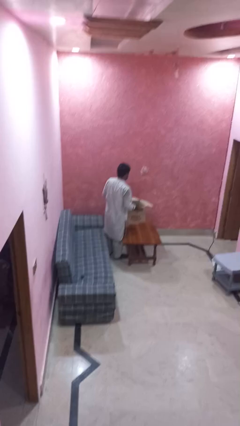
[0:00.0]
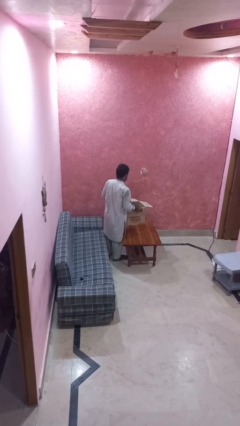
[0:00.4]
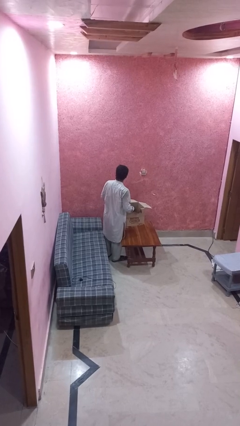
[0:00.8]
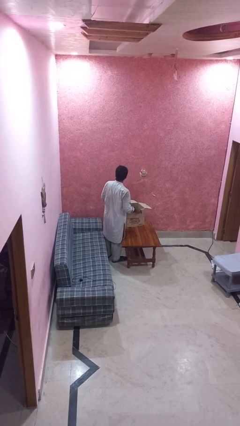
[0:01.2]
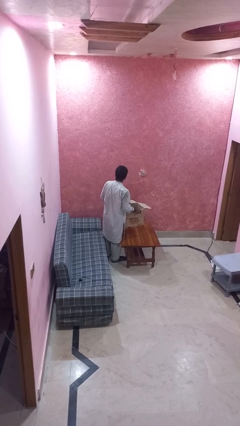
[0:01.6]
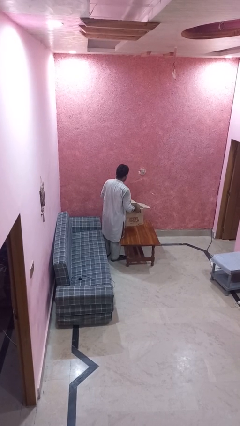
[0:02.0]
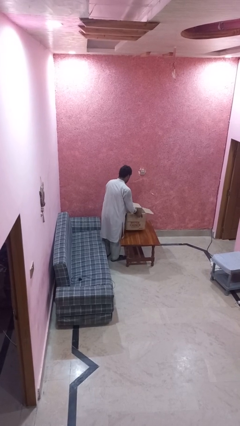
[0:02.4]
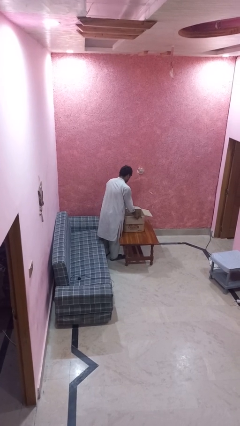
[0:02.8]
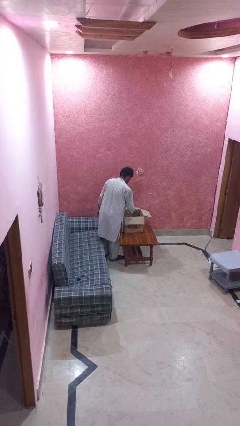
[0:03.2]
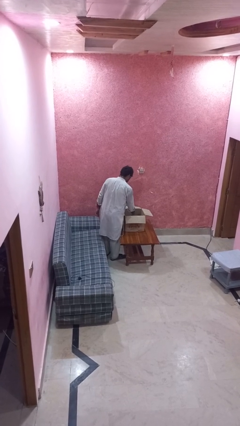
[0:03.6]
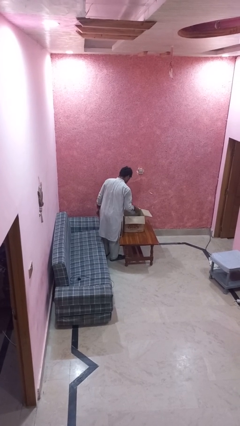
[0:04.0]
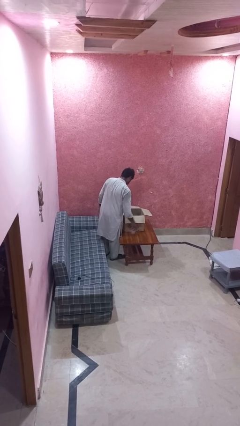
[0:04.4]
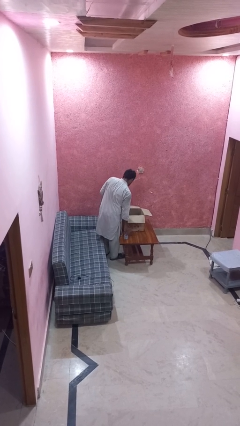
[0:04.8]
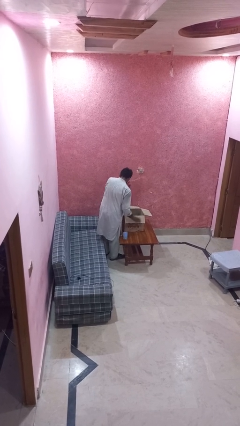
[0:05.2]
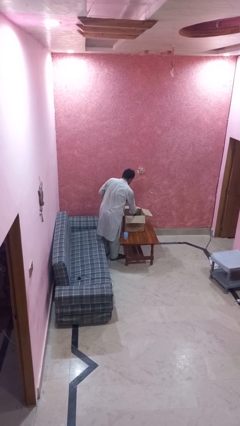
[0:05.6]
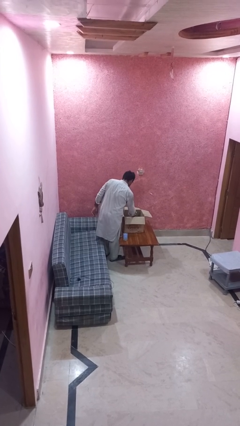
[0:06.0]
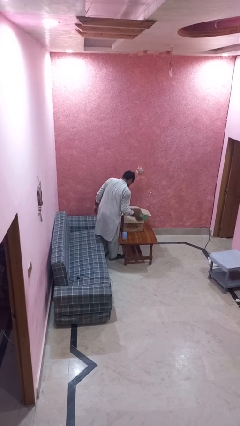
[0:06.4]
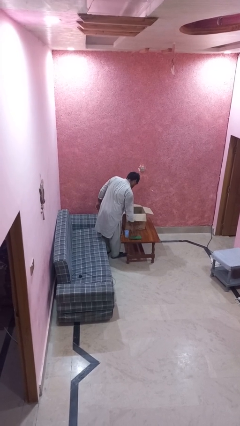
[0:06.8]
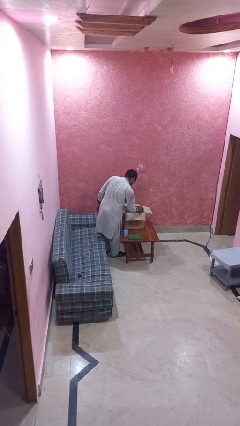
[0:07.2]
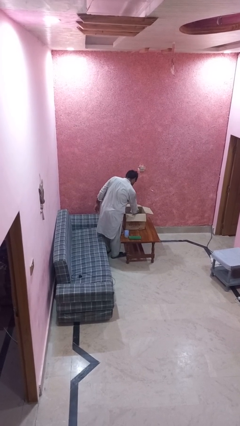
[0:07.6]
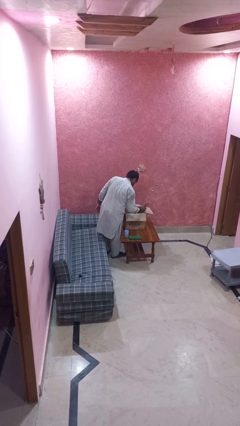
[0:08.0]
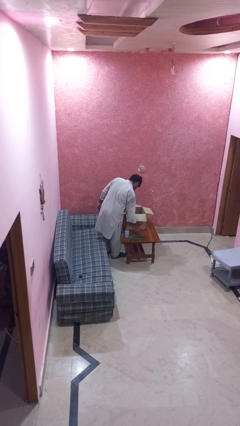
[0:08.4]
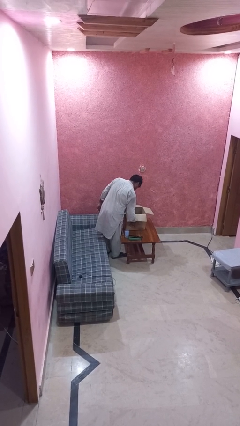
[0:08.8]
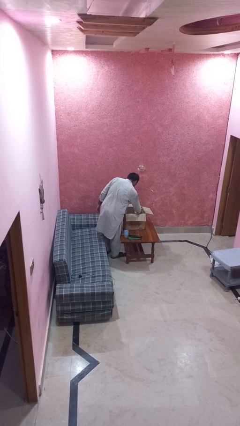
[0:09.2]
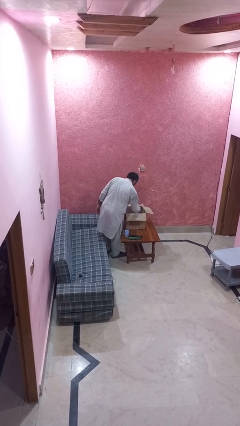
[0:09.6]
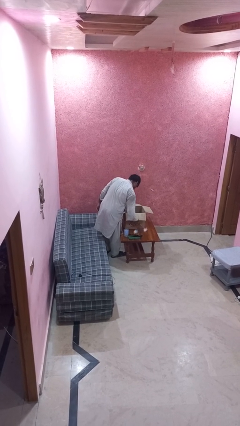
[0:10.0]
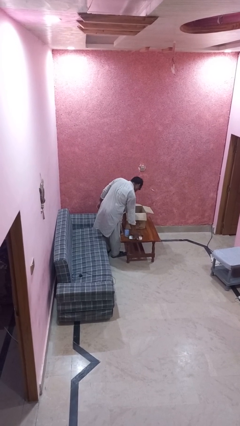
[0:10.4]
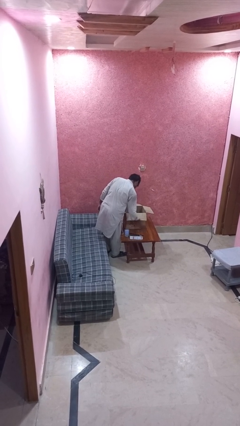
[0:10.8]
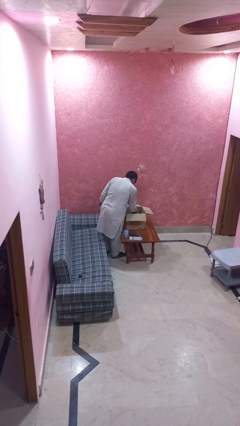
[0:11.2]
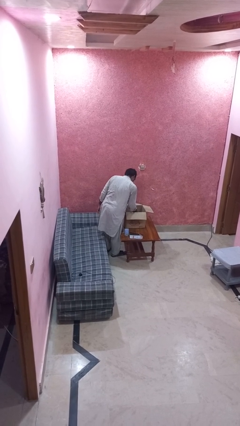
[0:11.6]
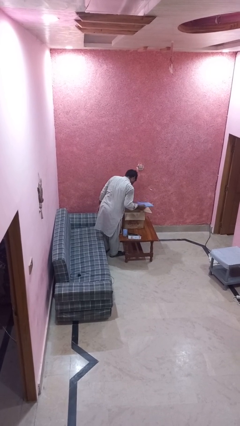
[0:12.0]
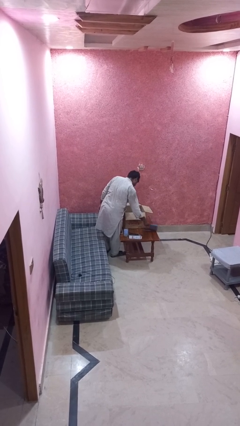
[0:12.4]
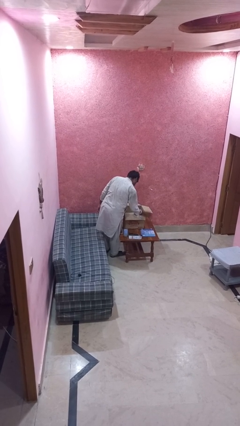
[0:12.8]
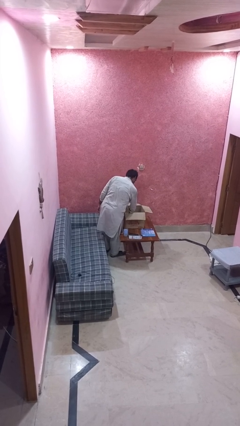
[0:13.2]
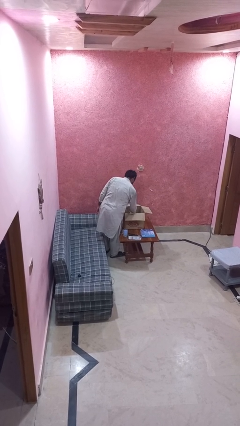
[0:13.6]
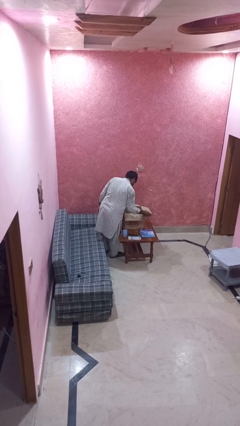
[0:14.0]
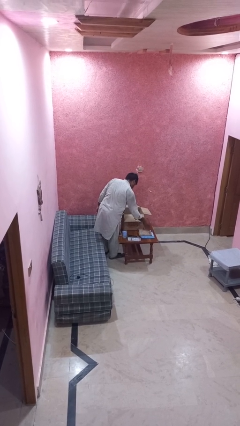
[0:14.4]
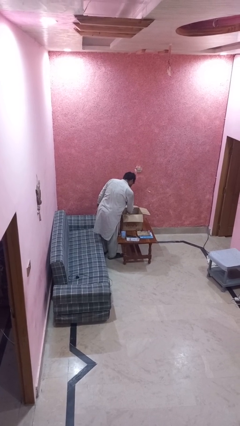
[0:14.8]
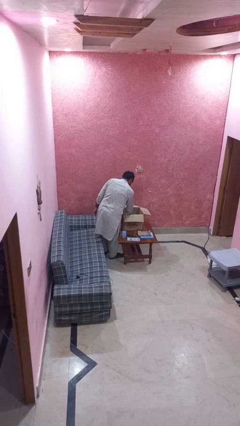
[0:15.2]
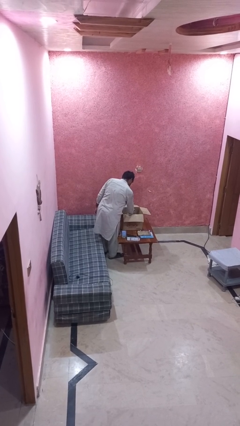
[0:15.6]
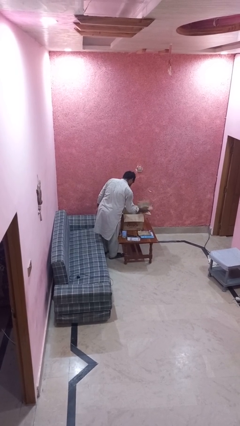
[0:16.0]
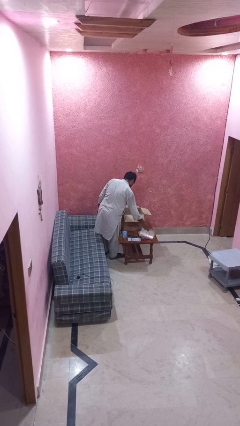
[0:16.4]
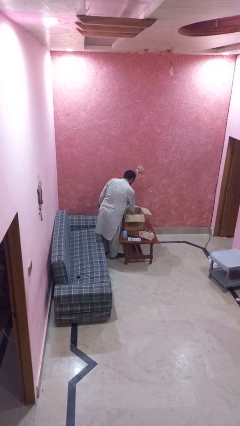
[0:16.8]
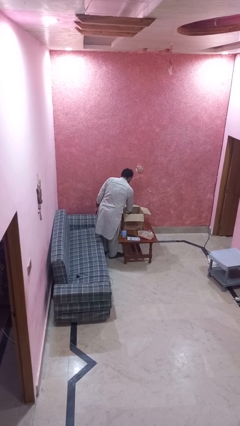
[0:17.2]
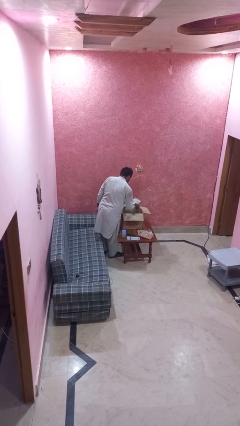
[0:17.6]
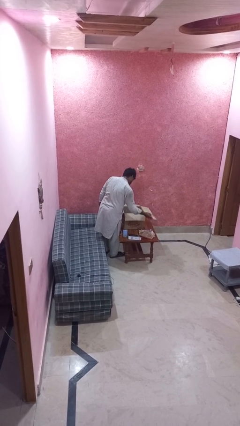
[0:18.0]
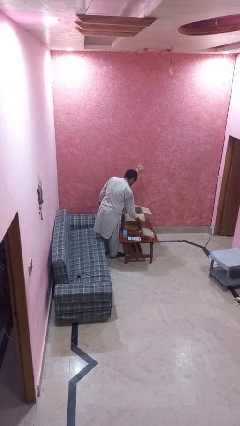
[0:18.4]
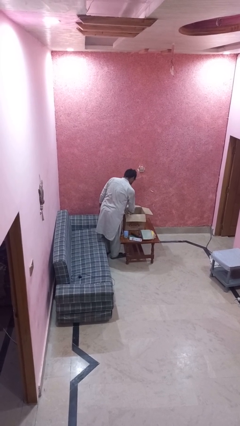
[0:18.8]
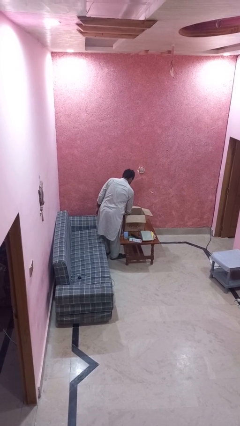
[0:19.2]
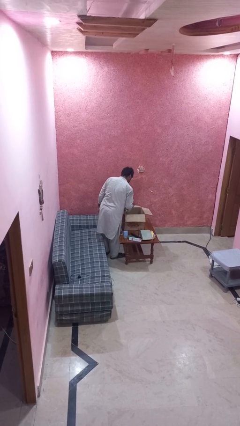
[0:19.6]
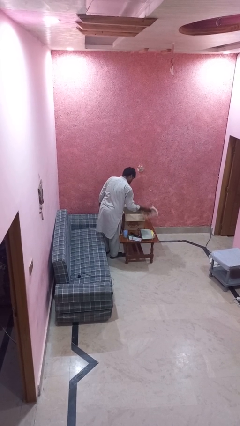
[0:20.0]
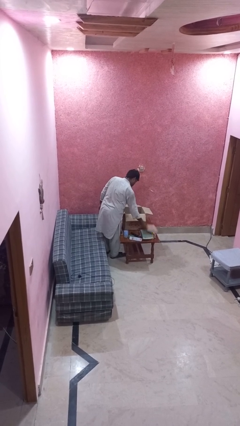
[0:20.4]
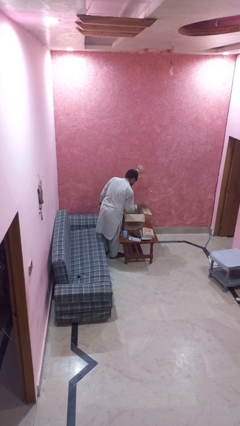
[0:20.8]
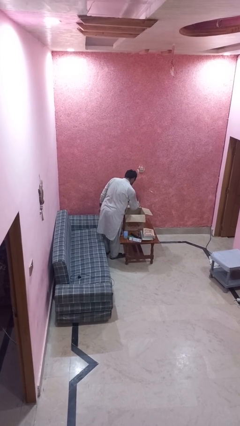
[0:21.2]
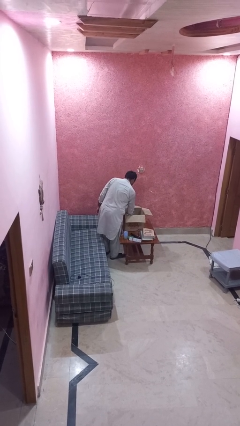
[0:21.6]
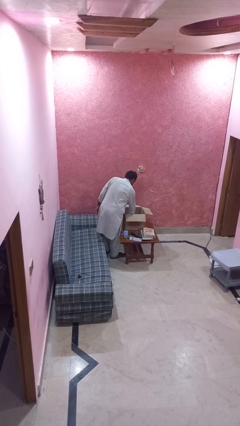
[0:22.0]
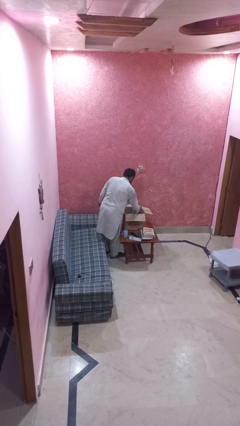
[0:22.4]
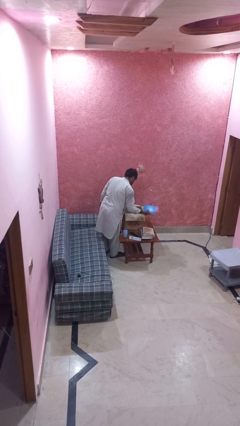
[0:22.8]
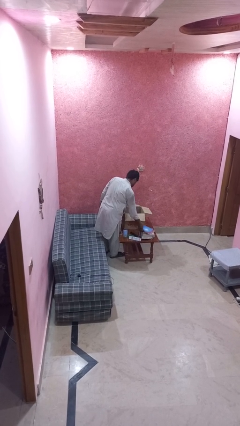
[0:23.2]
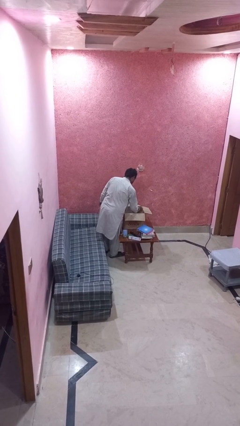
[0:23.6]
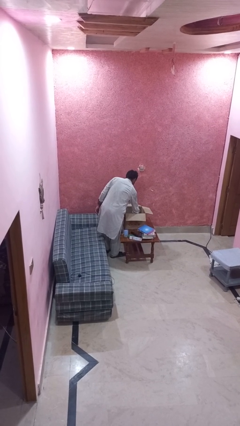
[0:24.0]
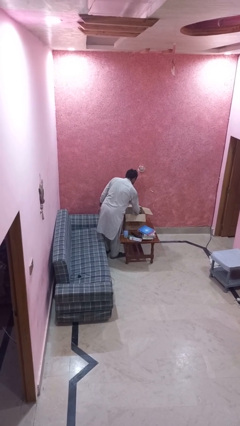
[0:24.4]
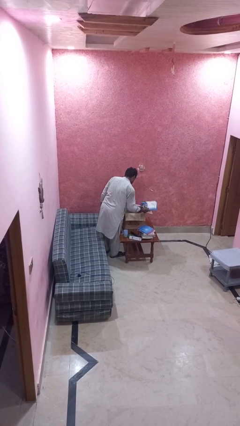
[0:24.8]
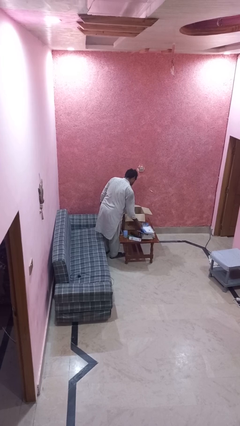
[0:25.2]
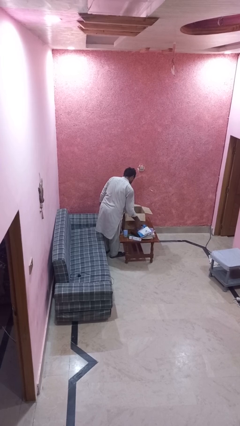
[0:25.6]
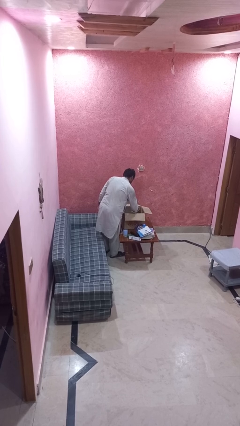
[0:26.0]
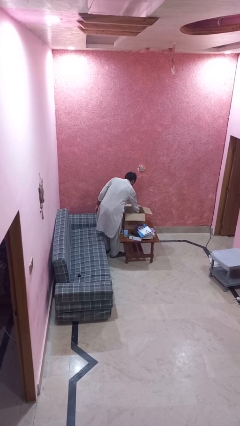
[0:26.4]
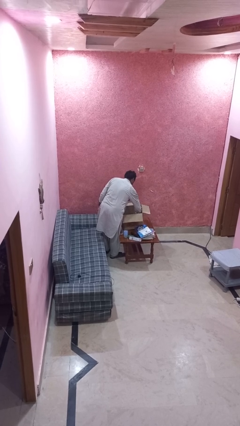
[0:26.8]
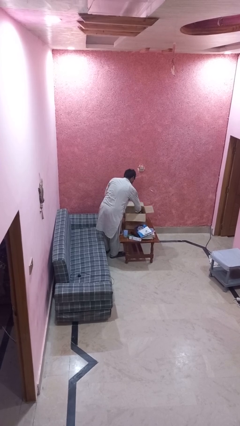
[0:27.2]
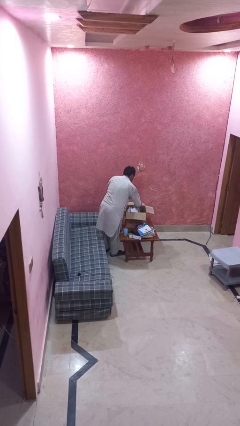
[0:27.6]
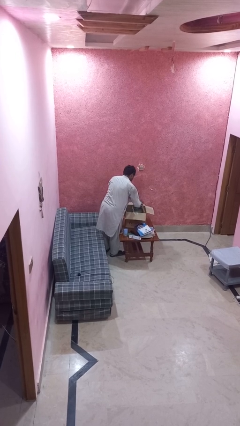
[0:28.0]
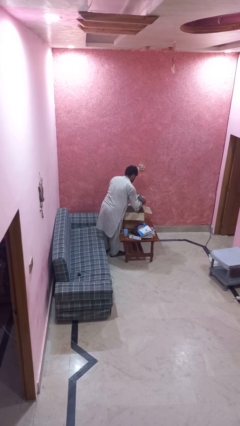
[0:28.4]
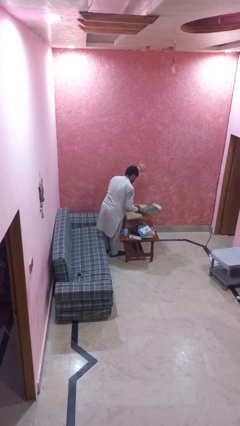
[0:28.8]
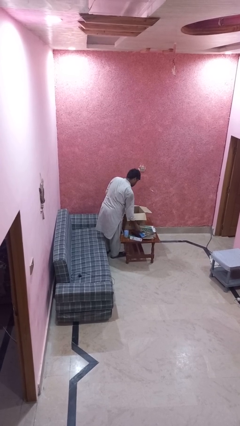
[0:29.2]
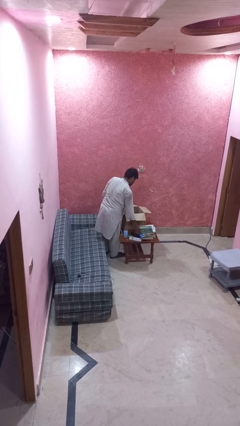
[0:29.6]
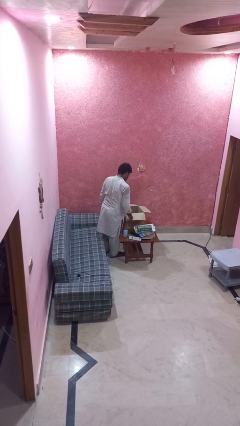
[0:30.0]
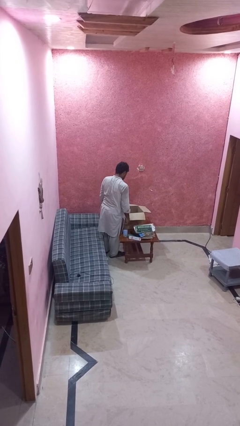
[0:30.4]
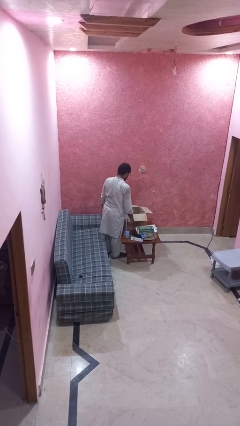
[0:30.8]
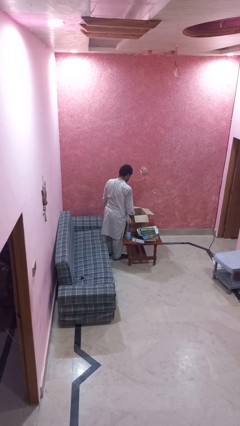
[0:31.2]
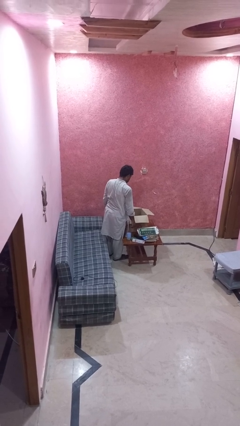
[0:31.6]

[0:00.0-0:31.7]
person unloads box onto table

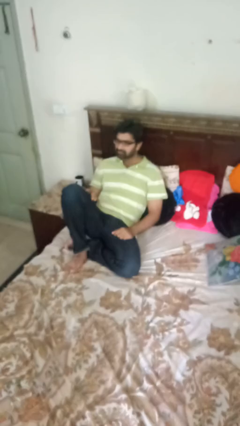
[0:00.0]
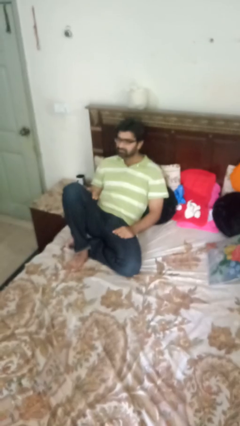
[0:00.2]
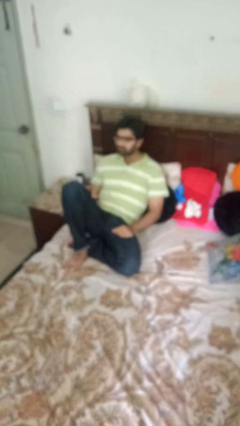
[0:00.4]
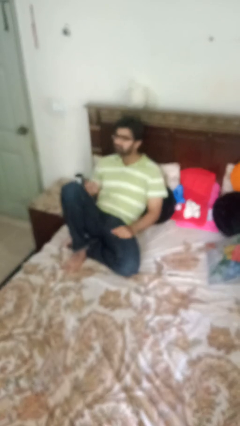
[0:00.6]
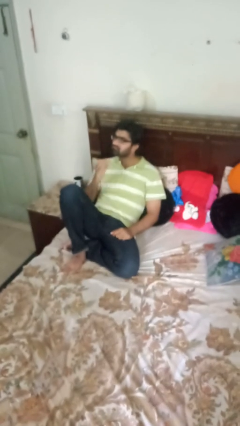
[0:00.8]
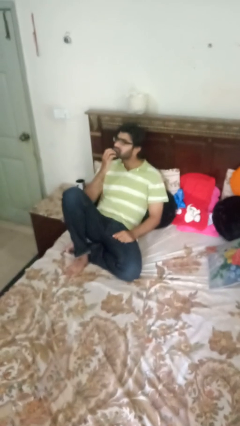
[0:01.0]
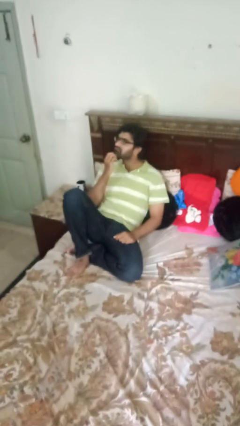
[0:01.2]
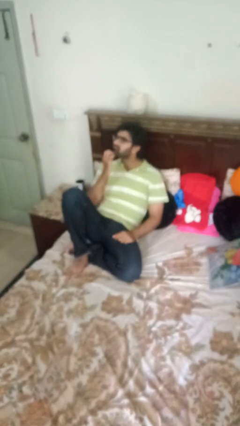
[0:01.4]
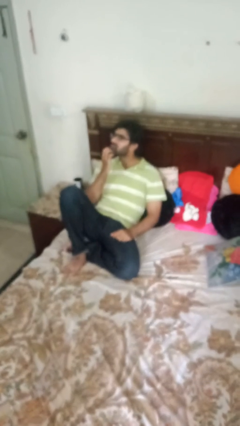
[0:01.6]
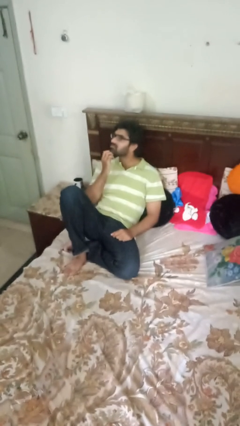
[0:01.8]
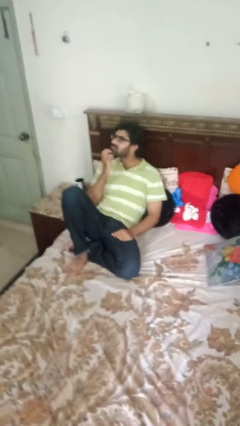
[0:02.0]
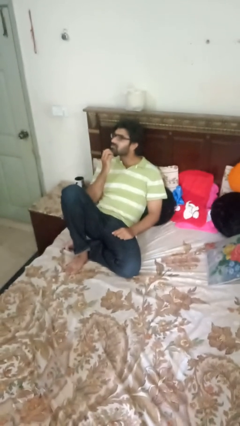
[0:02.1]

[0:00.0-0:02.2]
person strokes chin

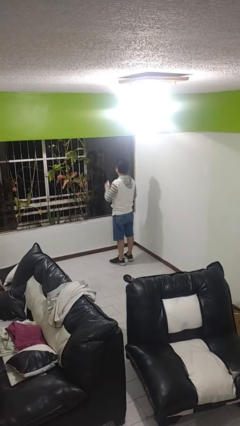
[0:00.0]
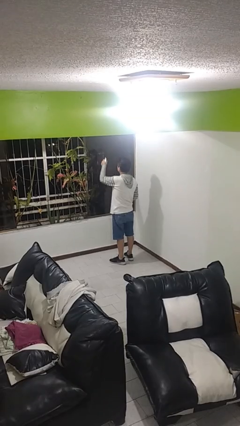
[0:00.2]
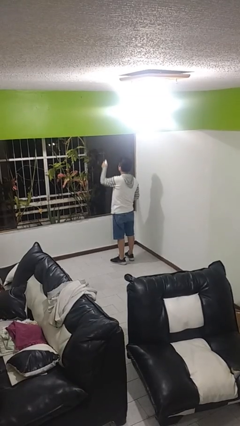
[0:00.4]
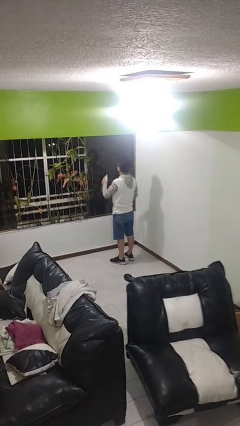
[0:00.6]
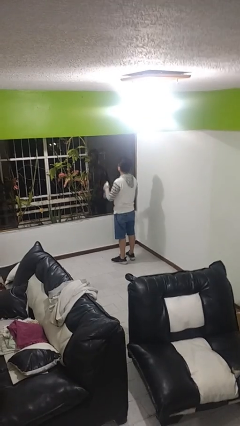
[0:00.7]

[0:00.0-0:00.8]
person sprays from bottle
